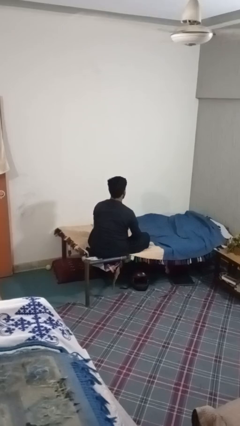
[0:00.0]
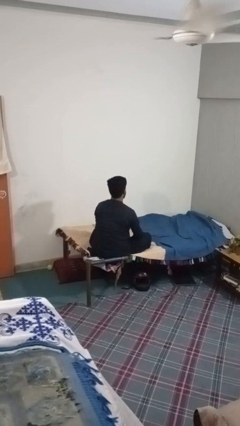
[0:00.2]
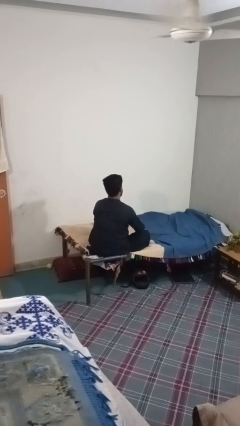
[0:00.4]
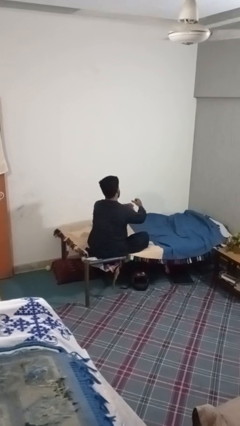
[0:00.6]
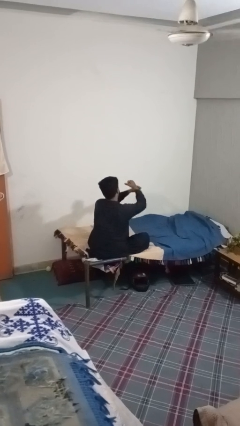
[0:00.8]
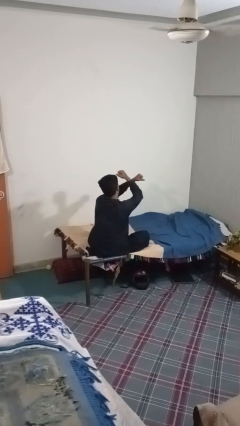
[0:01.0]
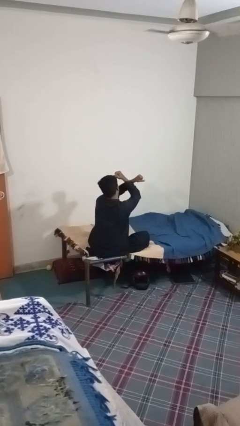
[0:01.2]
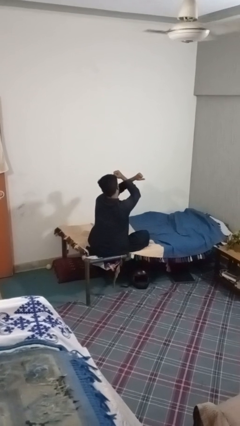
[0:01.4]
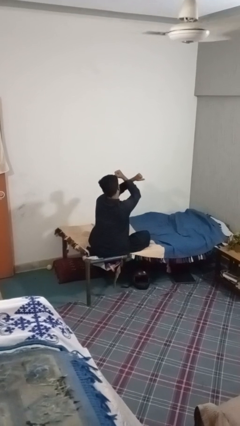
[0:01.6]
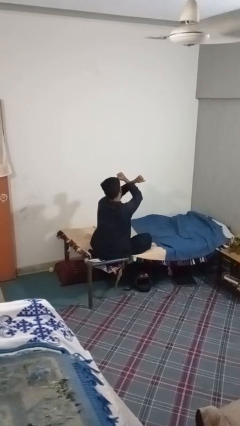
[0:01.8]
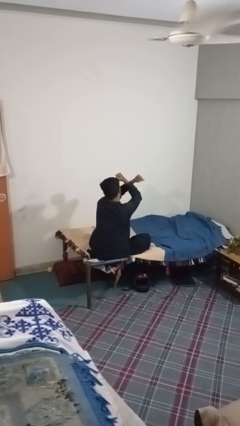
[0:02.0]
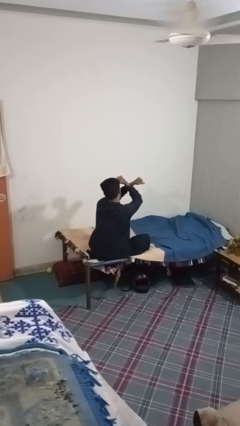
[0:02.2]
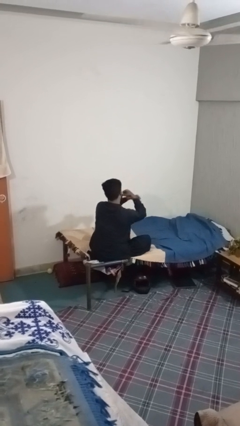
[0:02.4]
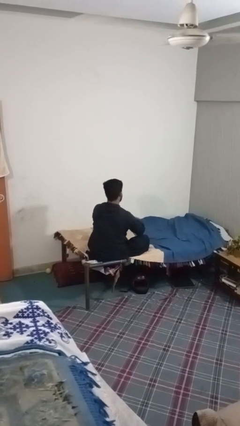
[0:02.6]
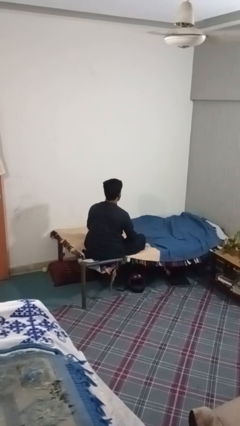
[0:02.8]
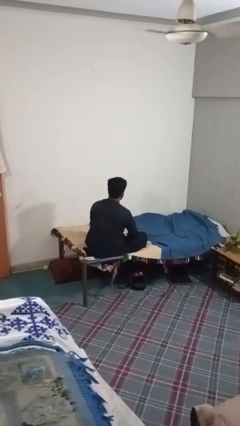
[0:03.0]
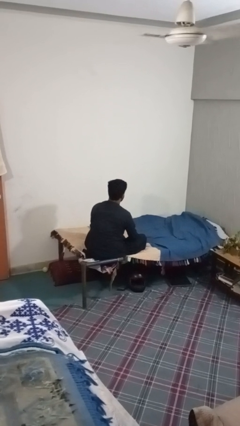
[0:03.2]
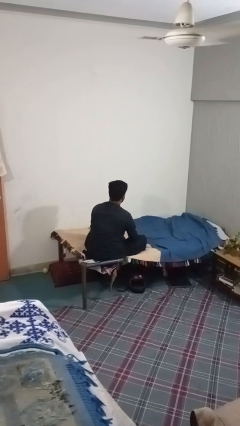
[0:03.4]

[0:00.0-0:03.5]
person gestures arms x

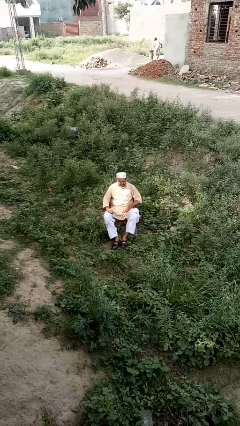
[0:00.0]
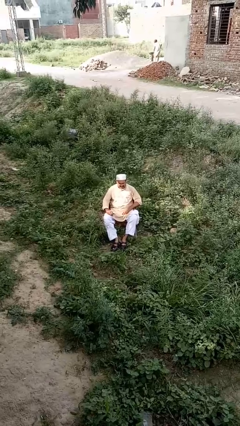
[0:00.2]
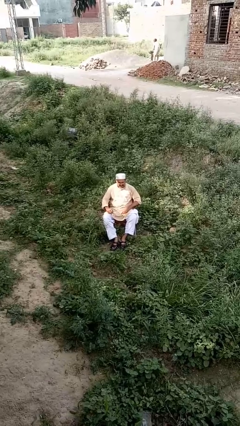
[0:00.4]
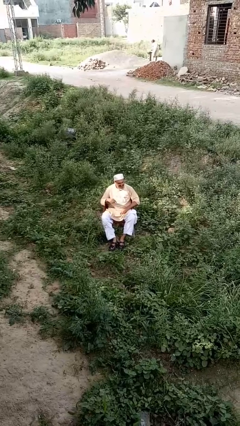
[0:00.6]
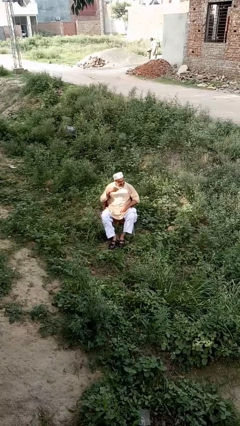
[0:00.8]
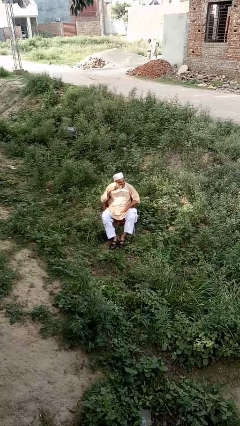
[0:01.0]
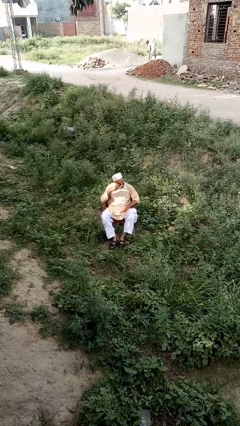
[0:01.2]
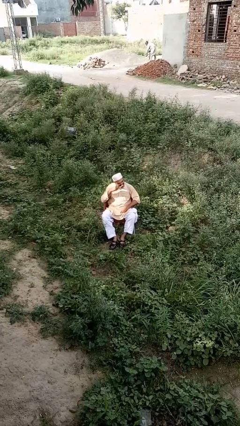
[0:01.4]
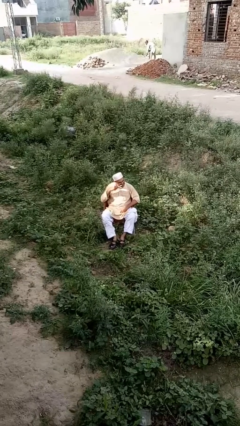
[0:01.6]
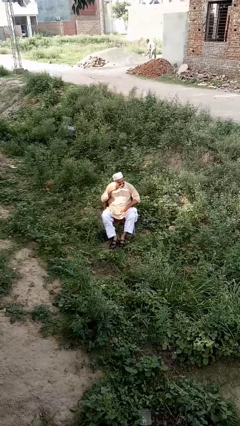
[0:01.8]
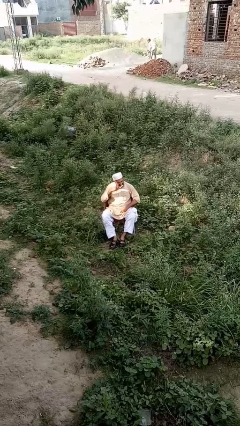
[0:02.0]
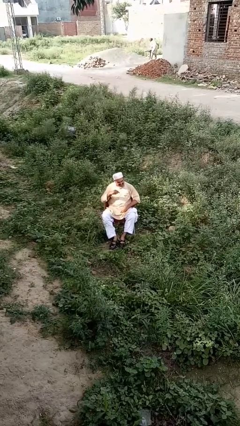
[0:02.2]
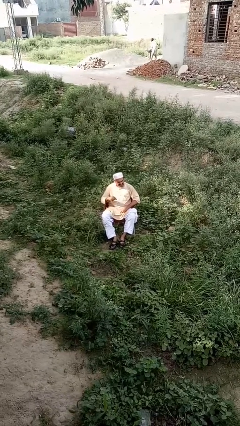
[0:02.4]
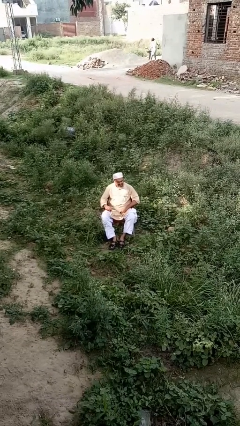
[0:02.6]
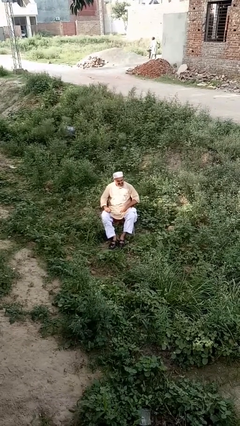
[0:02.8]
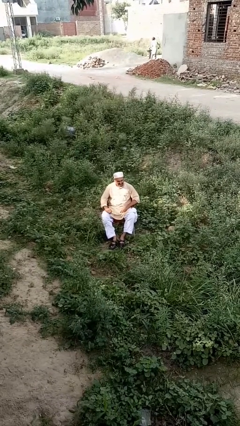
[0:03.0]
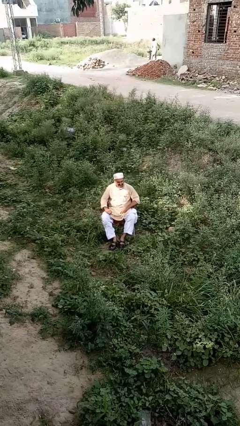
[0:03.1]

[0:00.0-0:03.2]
person brushes teeth

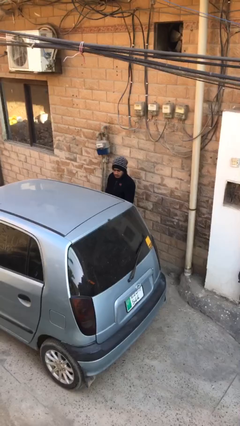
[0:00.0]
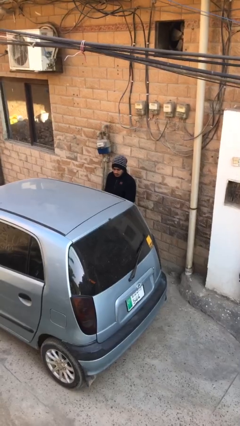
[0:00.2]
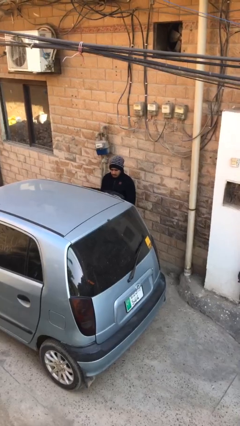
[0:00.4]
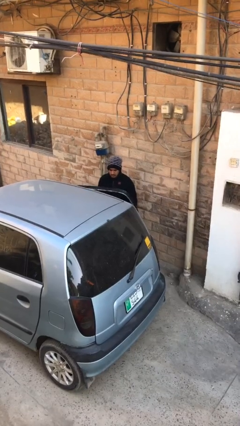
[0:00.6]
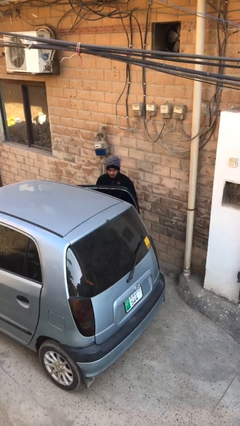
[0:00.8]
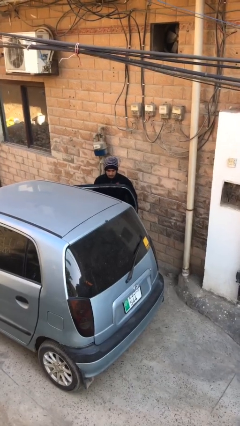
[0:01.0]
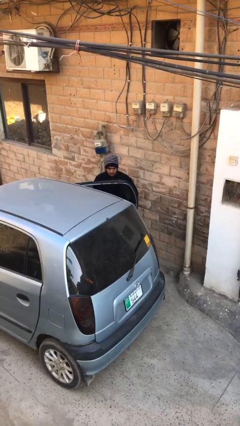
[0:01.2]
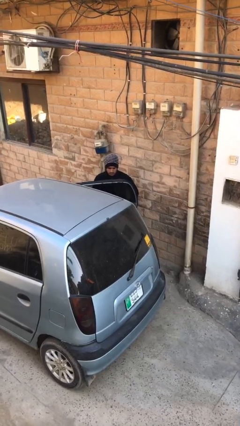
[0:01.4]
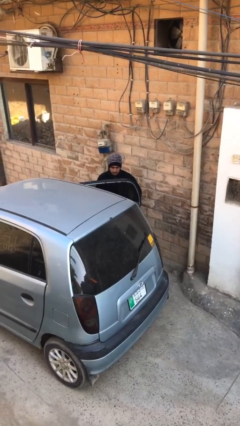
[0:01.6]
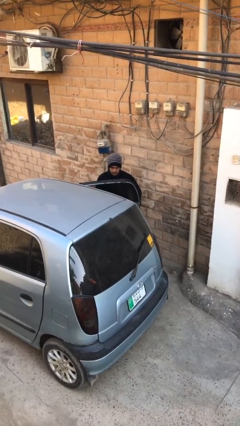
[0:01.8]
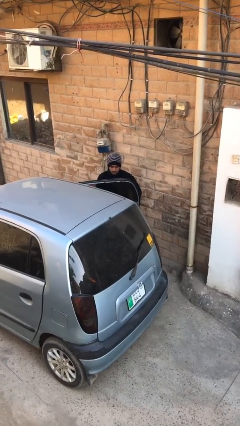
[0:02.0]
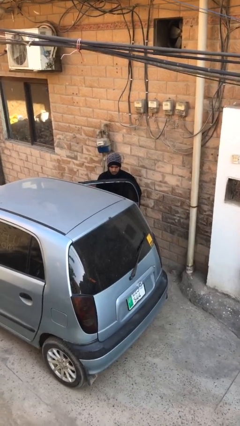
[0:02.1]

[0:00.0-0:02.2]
person opens car door

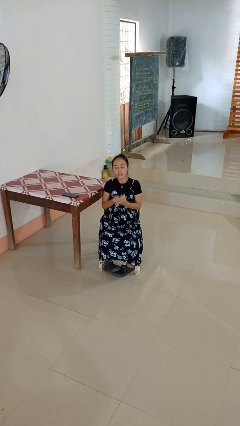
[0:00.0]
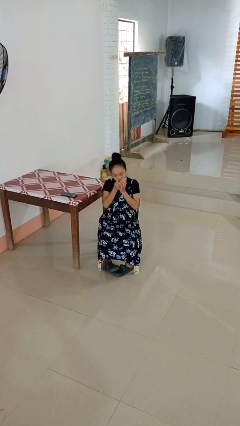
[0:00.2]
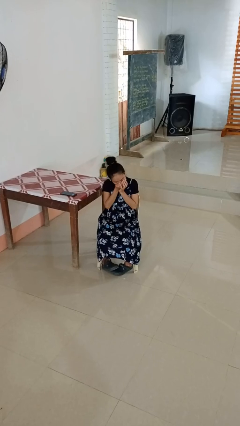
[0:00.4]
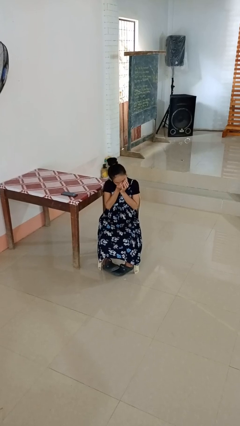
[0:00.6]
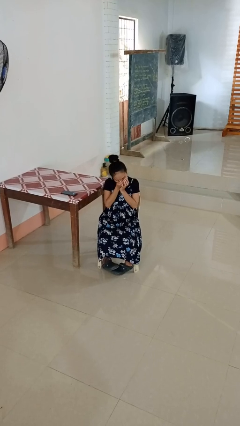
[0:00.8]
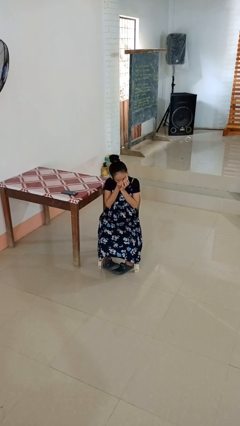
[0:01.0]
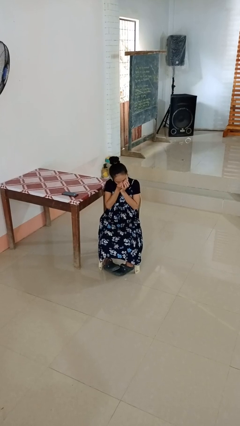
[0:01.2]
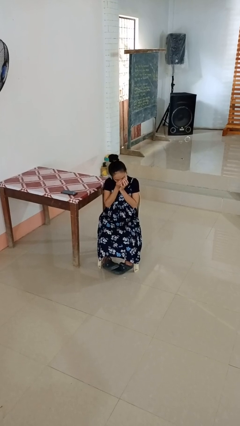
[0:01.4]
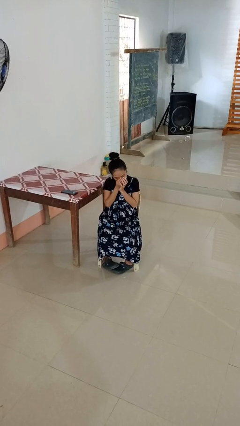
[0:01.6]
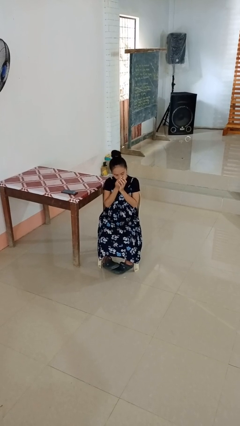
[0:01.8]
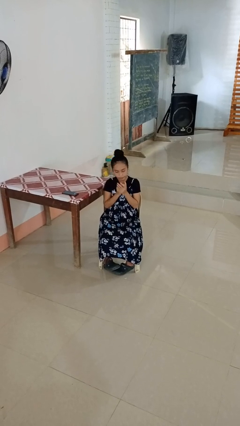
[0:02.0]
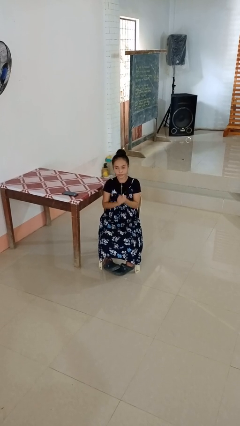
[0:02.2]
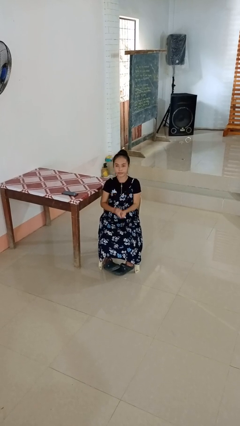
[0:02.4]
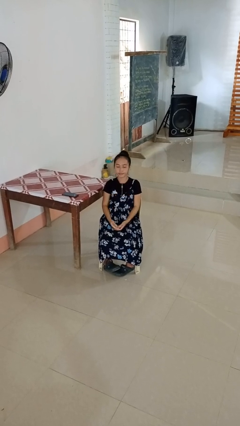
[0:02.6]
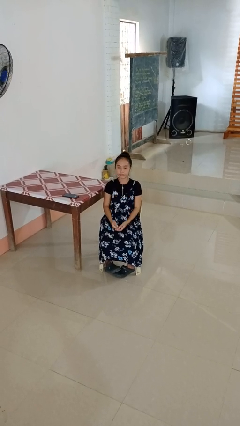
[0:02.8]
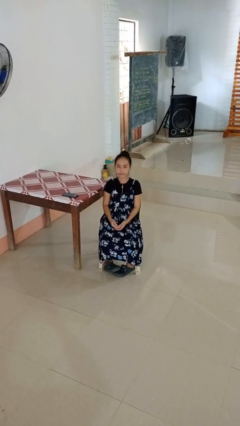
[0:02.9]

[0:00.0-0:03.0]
person sneezes into hand

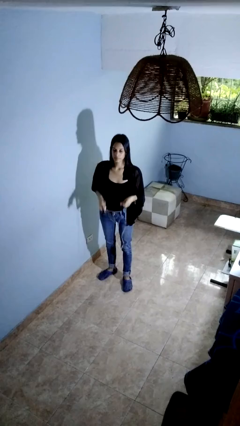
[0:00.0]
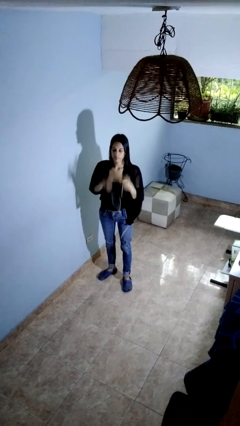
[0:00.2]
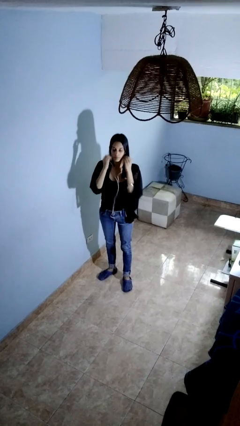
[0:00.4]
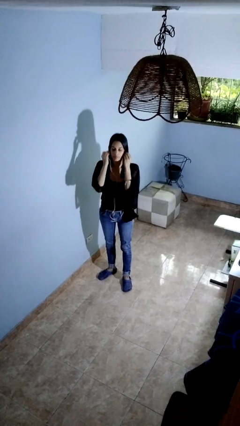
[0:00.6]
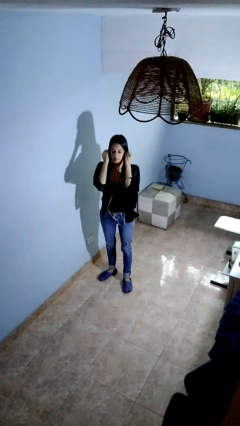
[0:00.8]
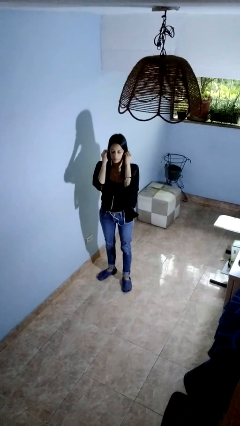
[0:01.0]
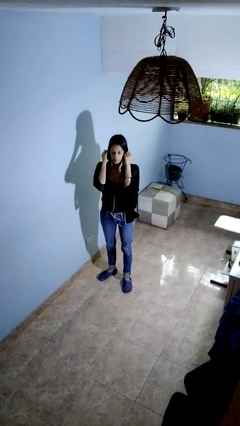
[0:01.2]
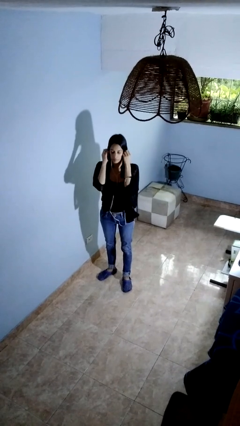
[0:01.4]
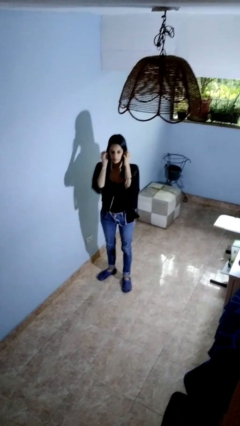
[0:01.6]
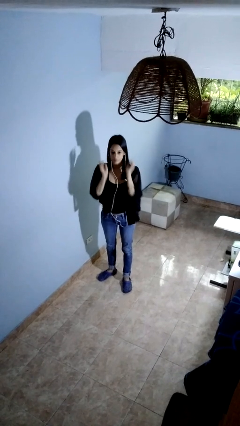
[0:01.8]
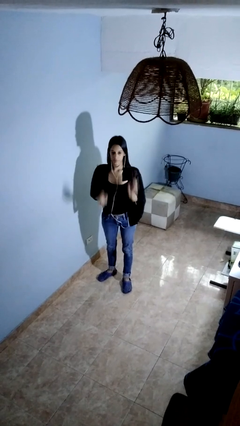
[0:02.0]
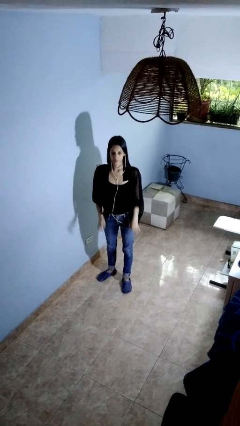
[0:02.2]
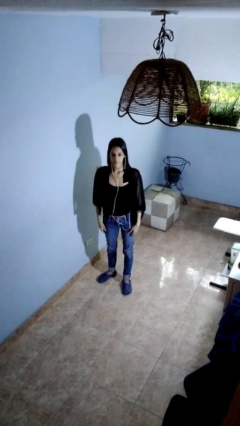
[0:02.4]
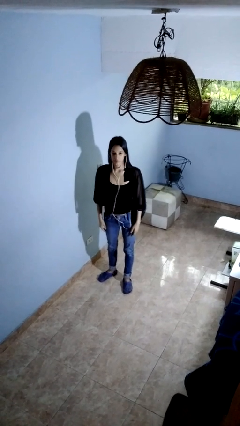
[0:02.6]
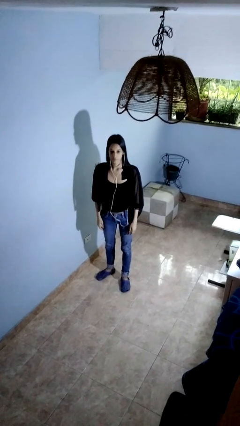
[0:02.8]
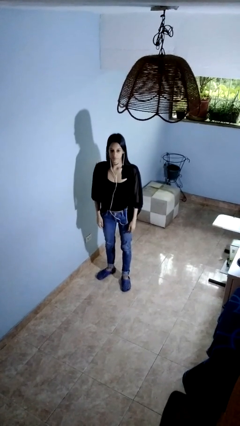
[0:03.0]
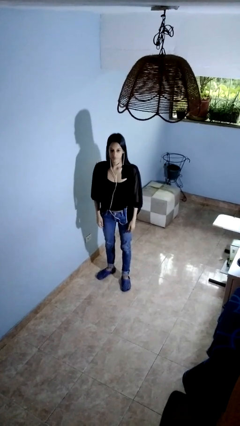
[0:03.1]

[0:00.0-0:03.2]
person puts on headphones

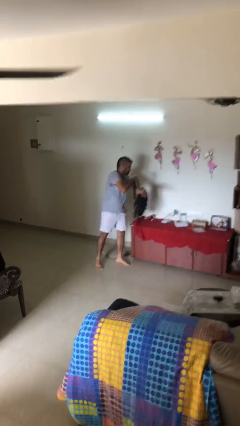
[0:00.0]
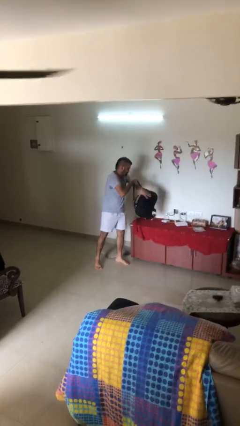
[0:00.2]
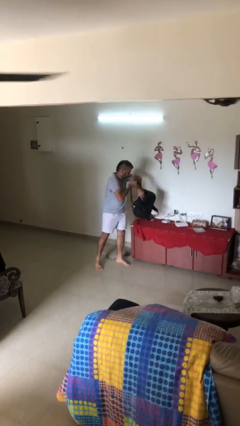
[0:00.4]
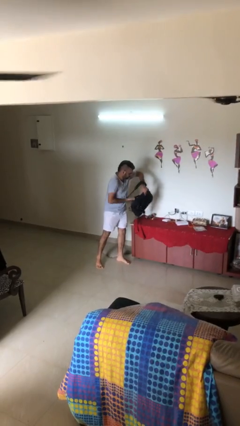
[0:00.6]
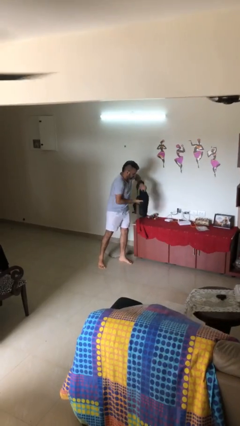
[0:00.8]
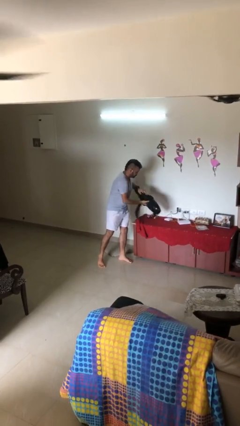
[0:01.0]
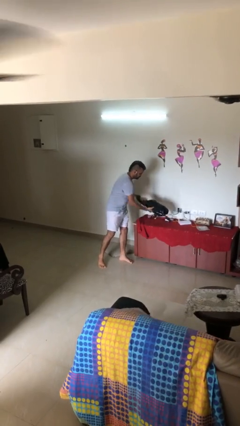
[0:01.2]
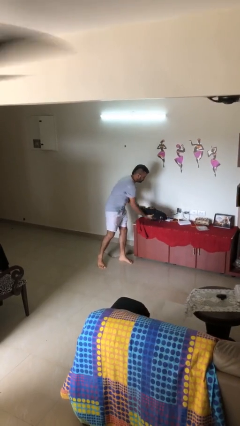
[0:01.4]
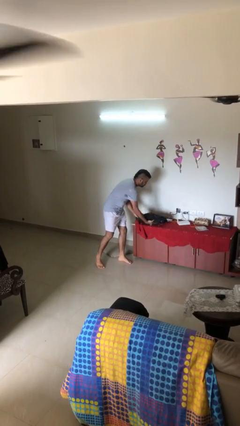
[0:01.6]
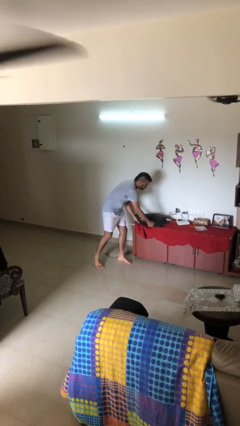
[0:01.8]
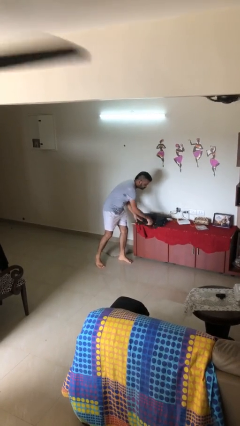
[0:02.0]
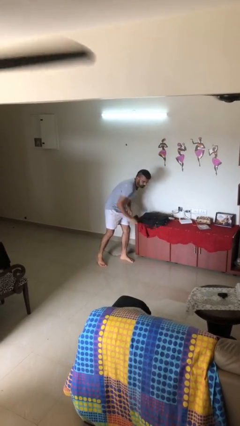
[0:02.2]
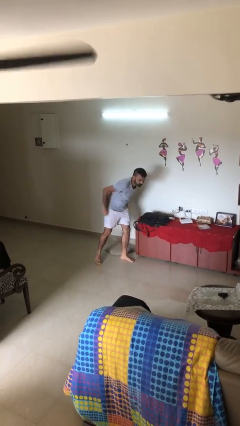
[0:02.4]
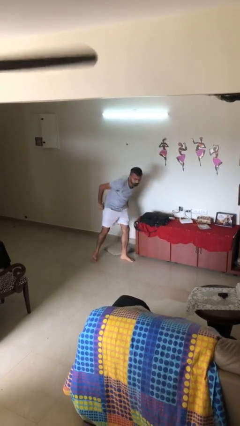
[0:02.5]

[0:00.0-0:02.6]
person puts down object on table
